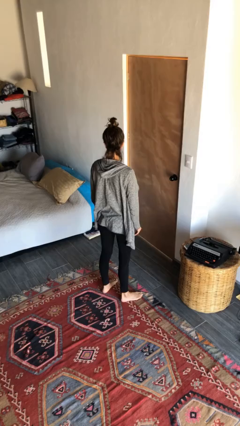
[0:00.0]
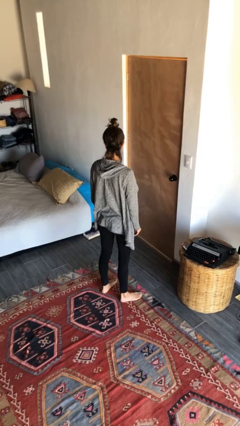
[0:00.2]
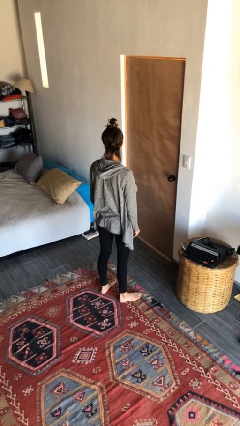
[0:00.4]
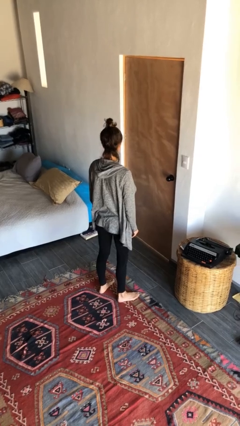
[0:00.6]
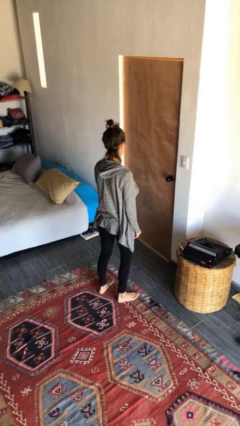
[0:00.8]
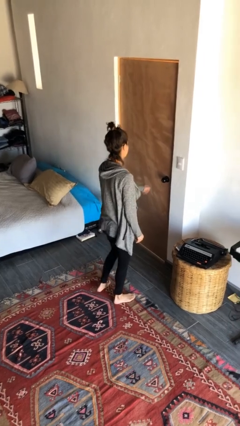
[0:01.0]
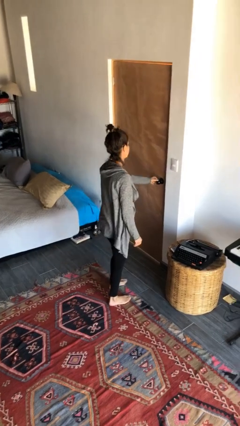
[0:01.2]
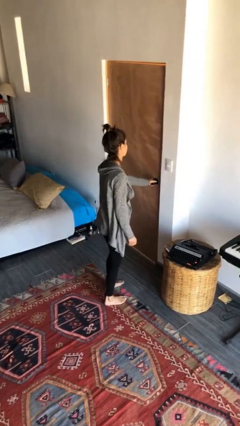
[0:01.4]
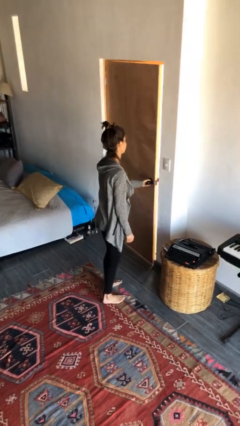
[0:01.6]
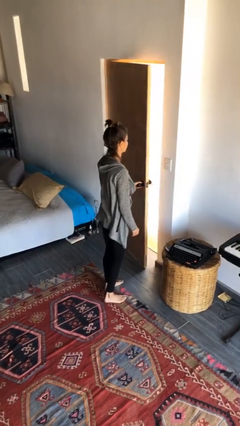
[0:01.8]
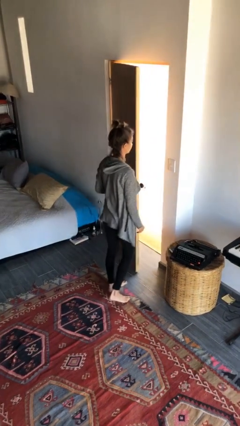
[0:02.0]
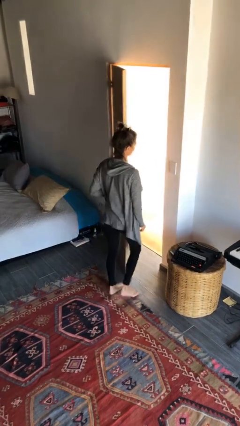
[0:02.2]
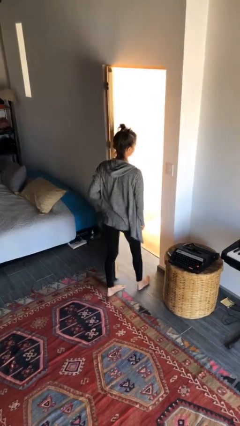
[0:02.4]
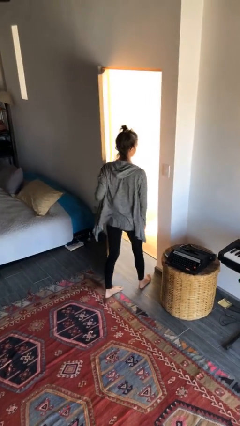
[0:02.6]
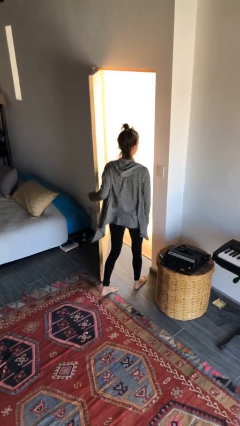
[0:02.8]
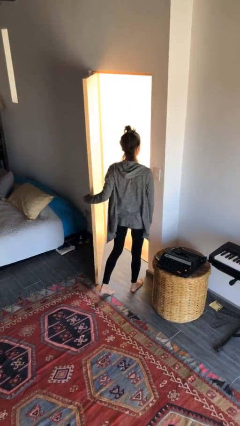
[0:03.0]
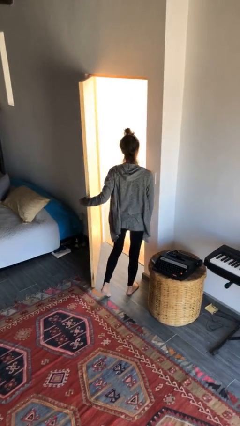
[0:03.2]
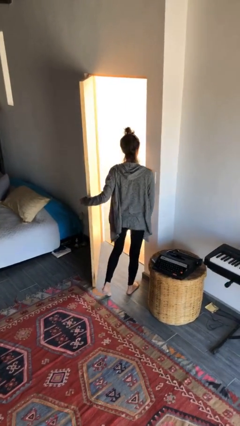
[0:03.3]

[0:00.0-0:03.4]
person opens facility door

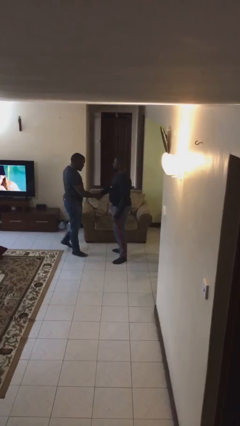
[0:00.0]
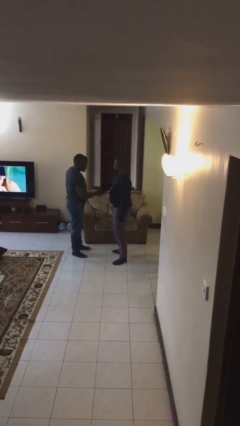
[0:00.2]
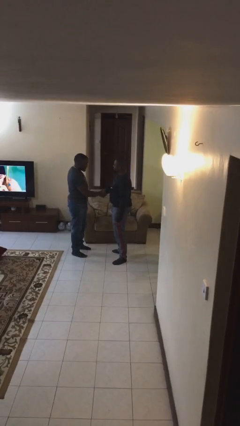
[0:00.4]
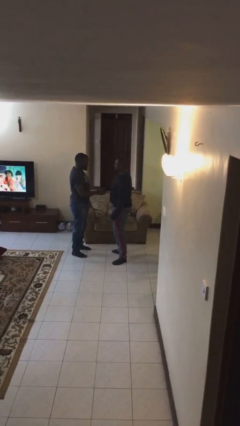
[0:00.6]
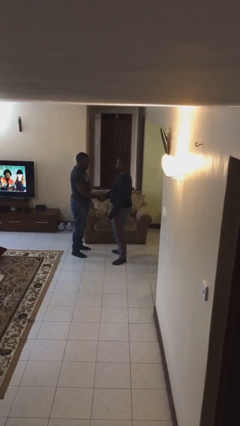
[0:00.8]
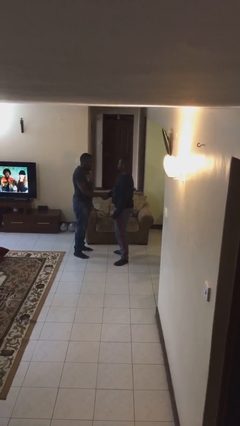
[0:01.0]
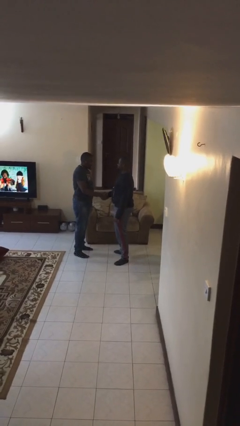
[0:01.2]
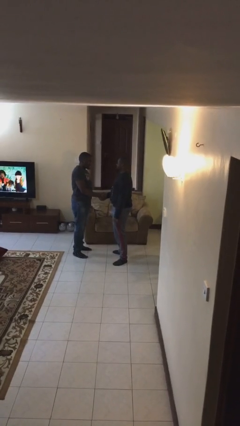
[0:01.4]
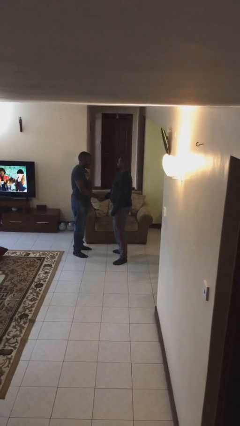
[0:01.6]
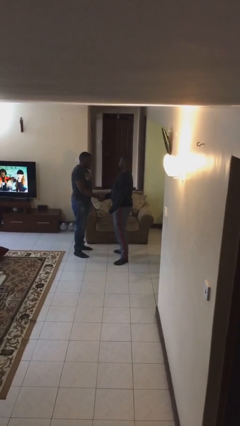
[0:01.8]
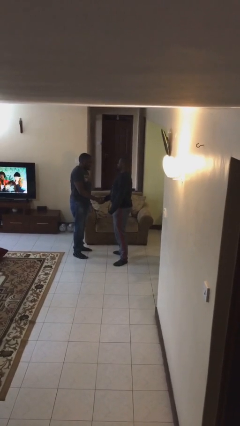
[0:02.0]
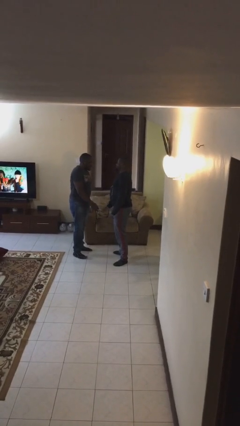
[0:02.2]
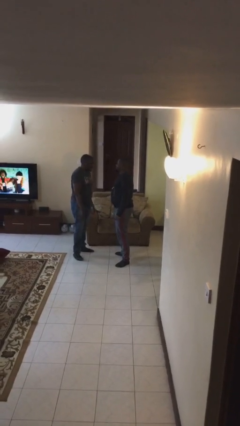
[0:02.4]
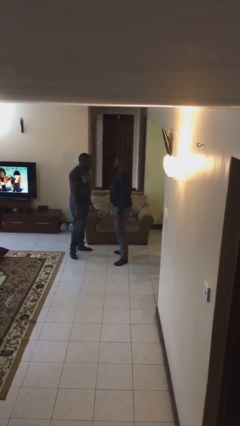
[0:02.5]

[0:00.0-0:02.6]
person shakes hand

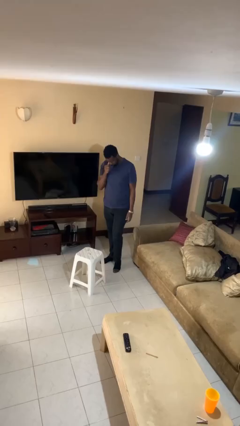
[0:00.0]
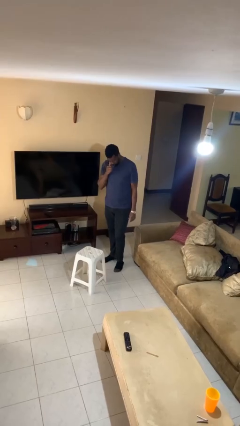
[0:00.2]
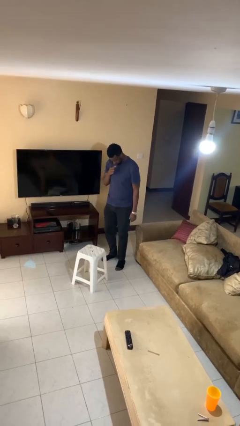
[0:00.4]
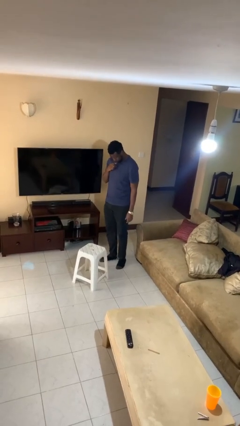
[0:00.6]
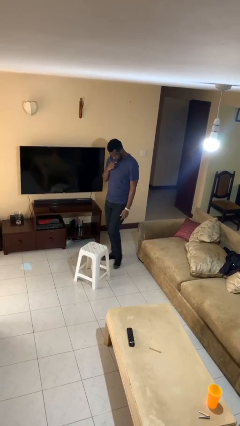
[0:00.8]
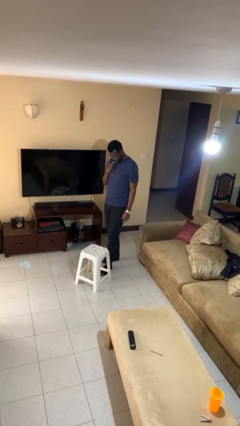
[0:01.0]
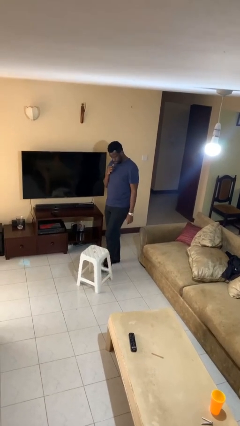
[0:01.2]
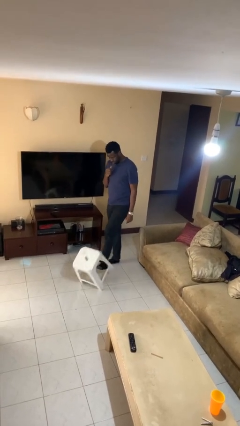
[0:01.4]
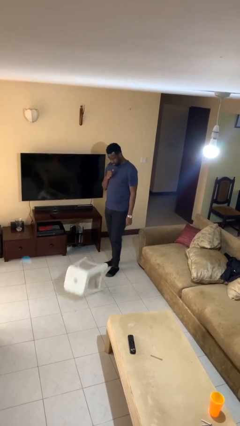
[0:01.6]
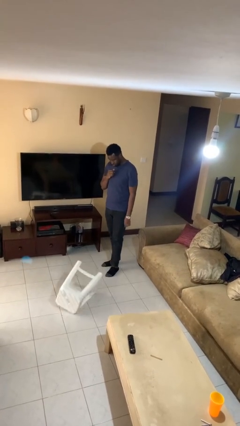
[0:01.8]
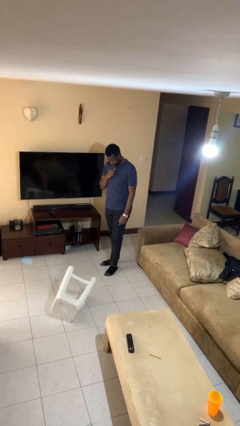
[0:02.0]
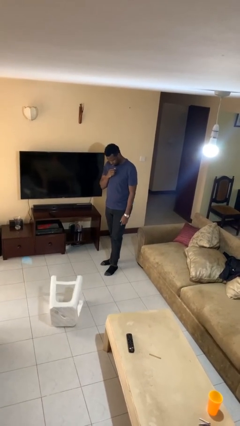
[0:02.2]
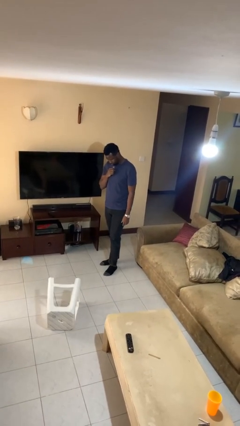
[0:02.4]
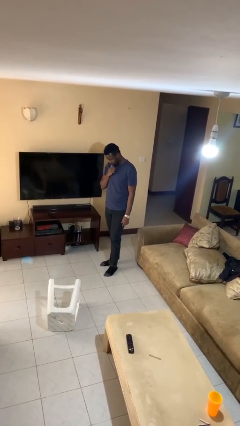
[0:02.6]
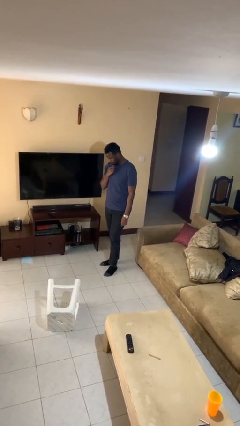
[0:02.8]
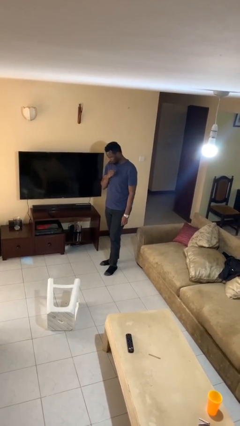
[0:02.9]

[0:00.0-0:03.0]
person knocks over furniture

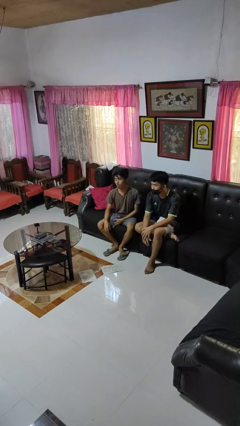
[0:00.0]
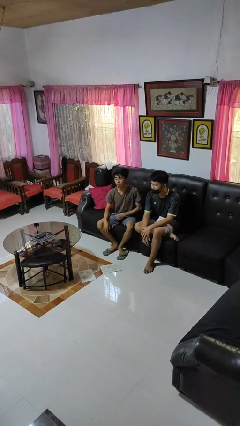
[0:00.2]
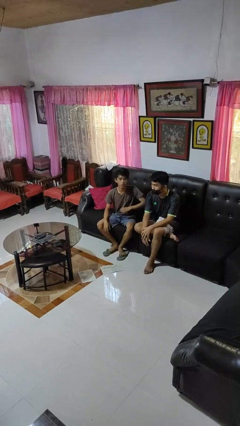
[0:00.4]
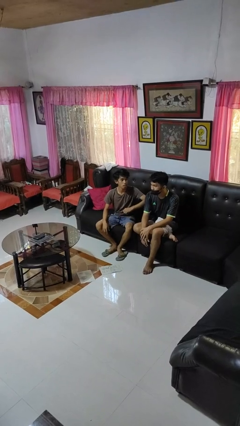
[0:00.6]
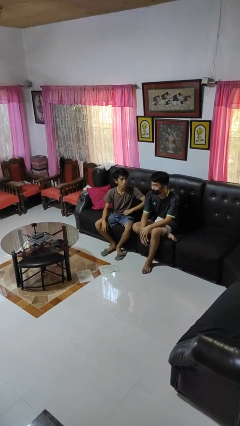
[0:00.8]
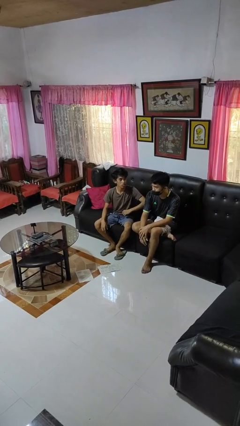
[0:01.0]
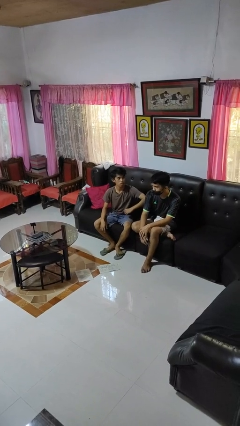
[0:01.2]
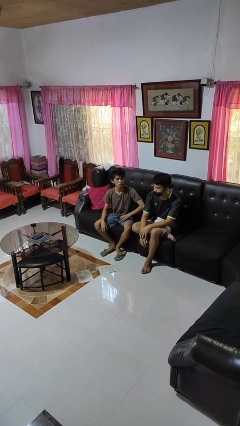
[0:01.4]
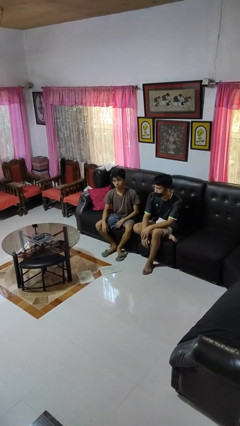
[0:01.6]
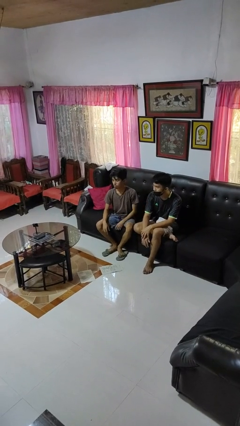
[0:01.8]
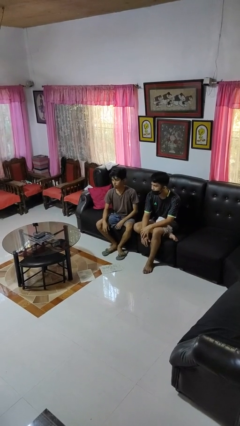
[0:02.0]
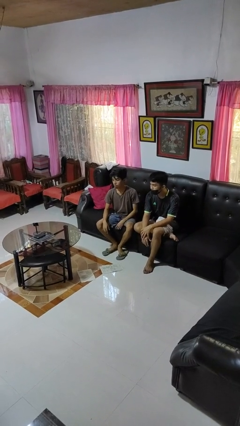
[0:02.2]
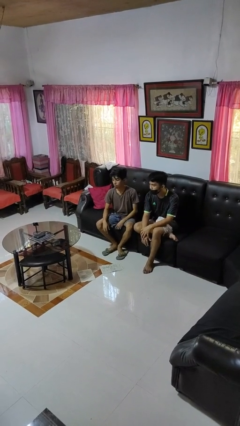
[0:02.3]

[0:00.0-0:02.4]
person nudges person with elbow

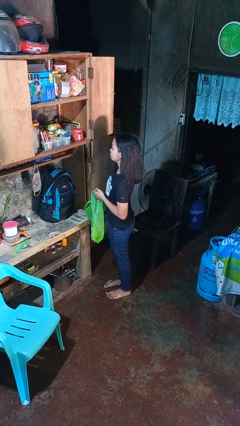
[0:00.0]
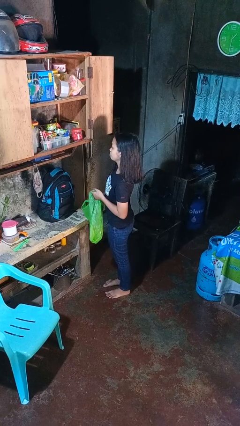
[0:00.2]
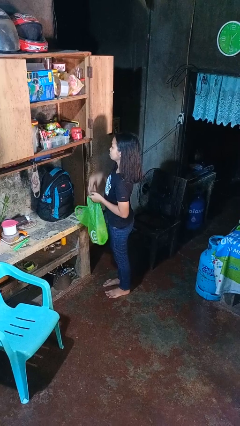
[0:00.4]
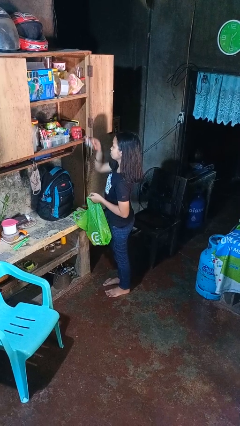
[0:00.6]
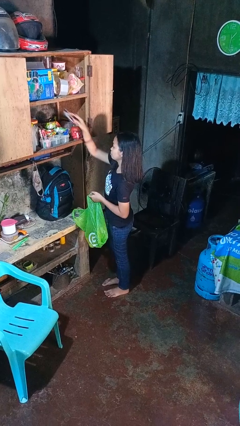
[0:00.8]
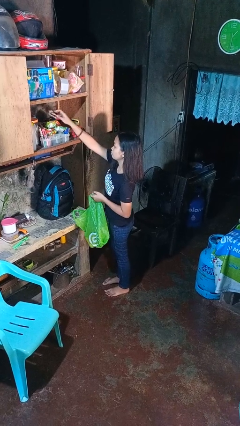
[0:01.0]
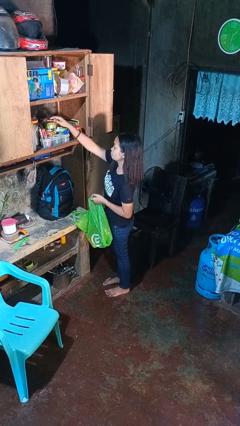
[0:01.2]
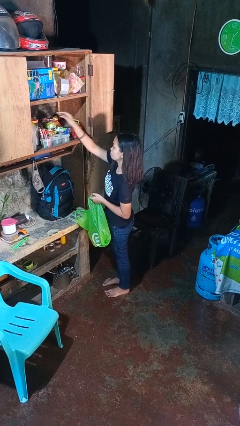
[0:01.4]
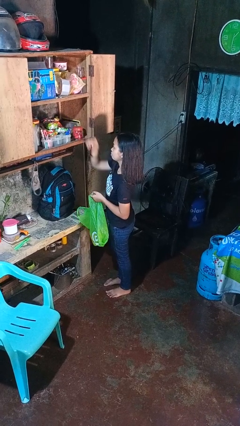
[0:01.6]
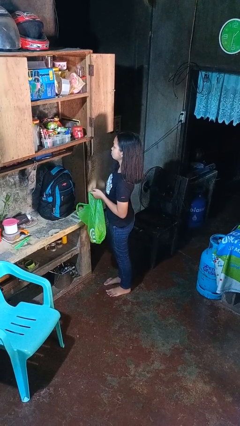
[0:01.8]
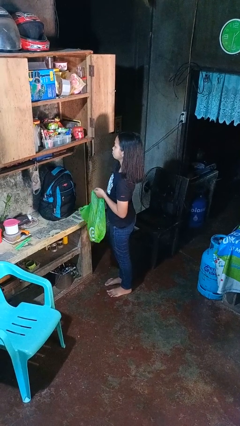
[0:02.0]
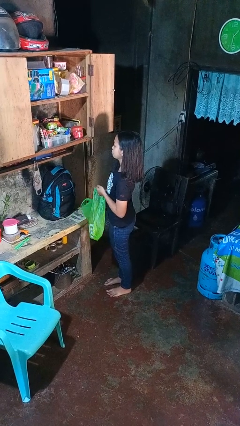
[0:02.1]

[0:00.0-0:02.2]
person loads groceries into cabinet

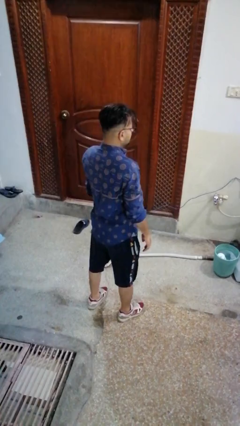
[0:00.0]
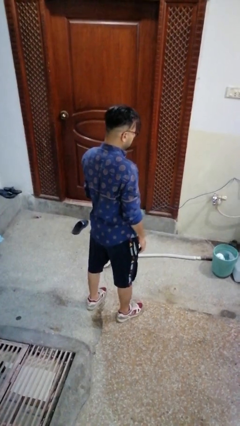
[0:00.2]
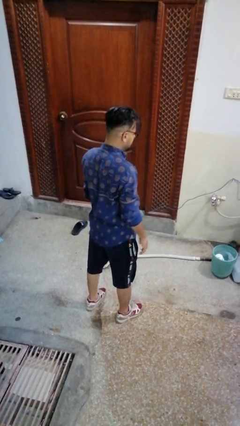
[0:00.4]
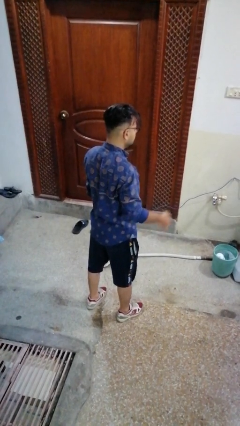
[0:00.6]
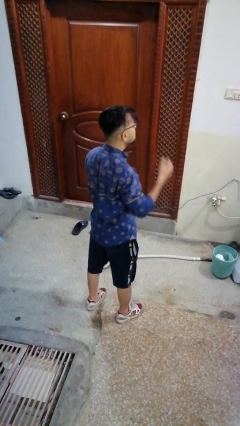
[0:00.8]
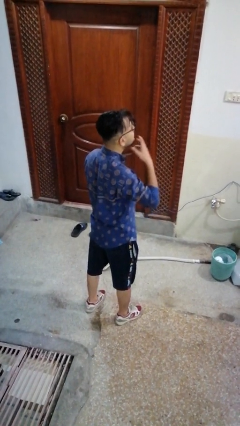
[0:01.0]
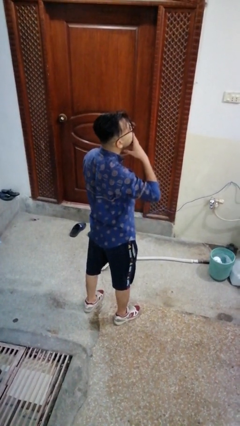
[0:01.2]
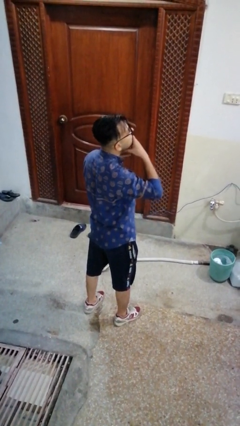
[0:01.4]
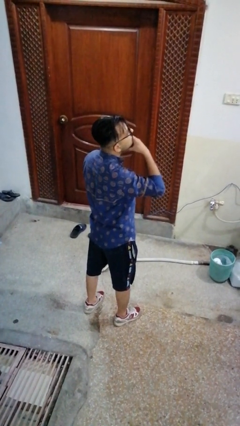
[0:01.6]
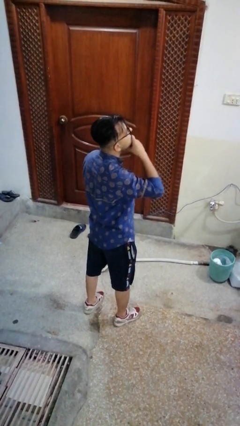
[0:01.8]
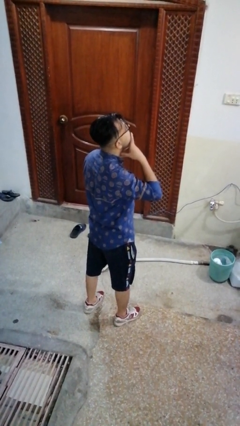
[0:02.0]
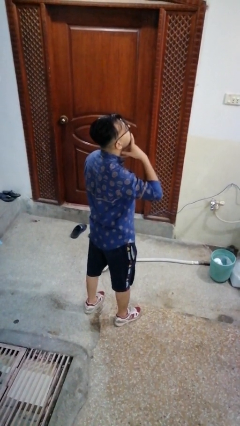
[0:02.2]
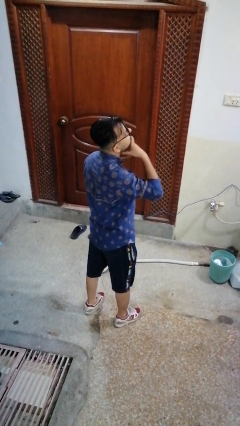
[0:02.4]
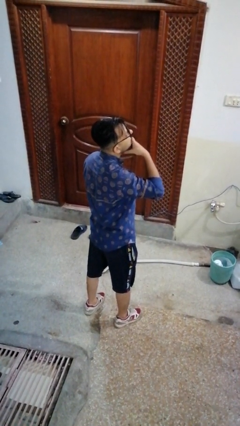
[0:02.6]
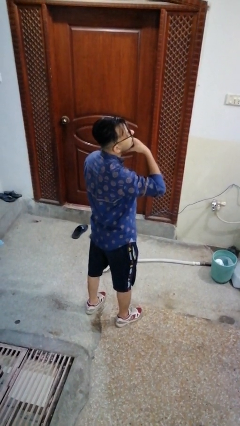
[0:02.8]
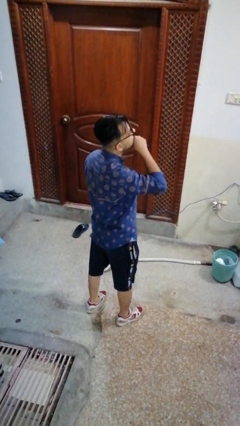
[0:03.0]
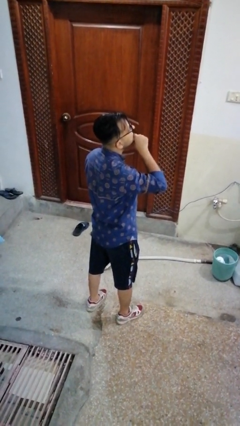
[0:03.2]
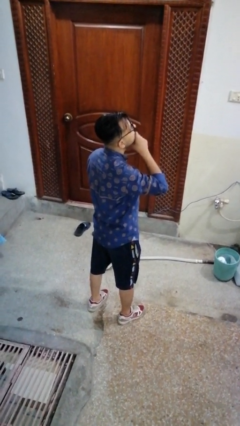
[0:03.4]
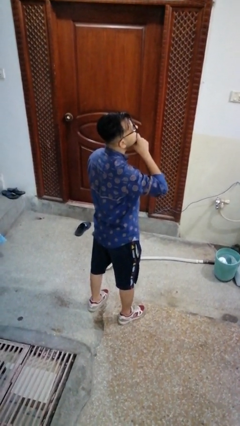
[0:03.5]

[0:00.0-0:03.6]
person strokes chin

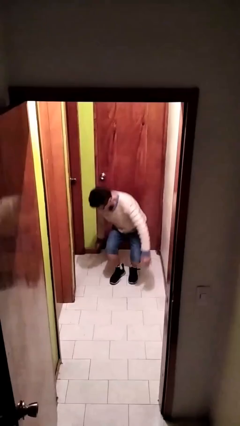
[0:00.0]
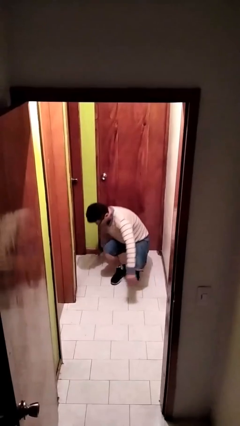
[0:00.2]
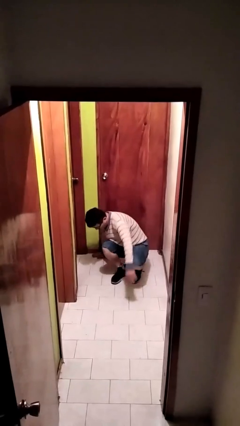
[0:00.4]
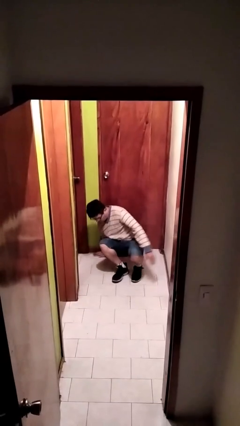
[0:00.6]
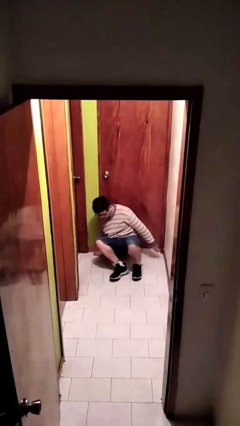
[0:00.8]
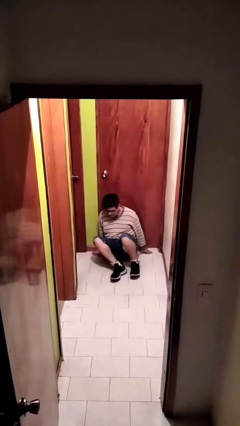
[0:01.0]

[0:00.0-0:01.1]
person sits down
